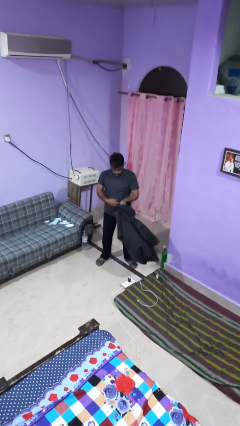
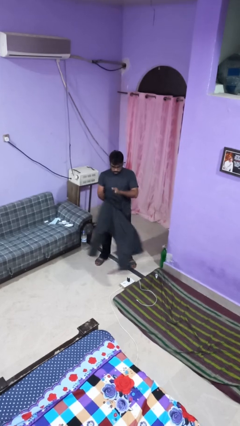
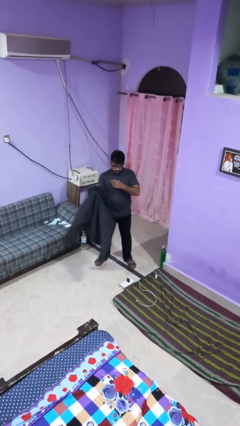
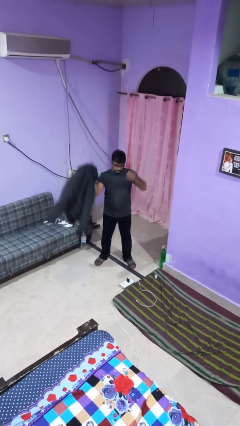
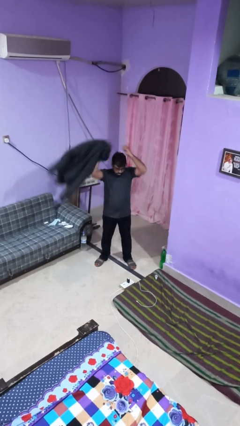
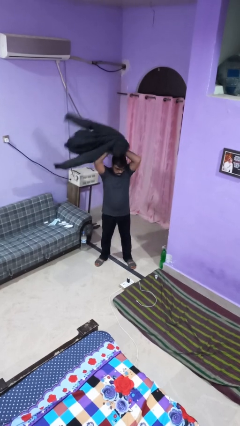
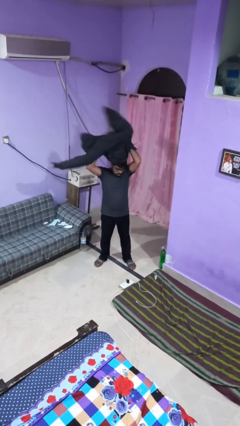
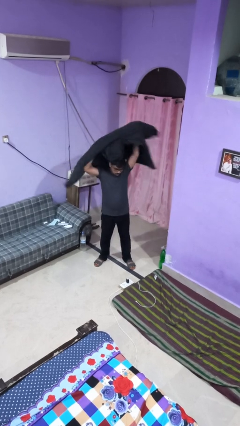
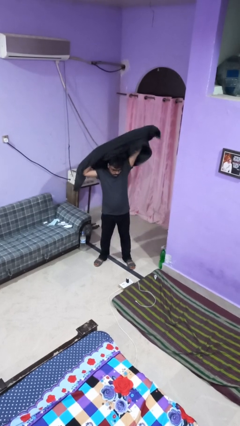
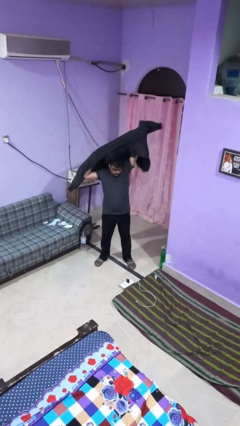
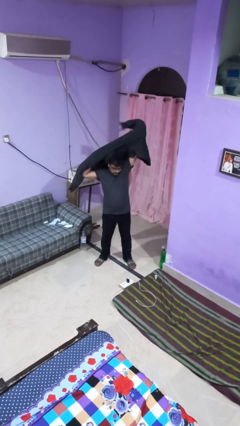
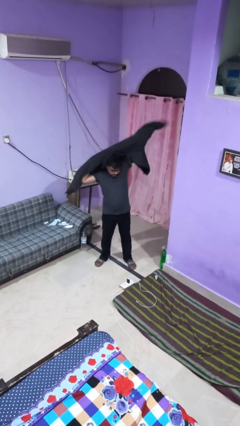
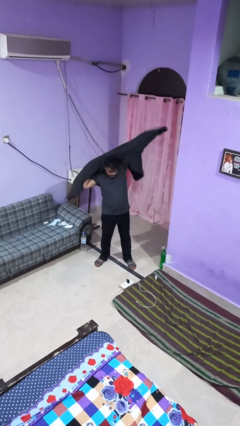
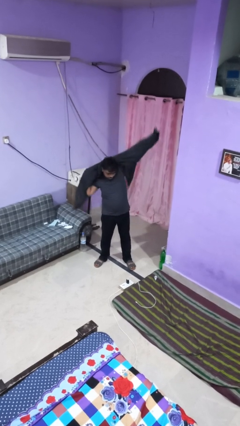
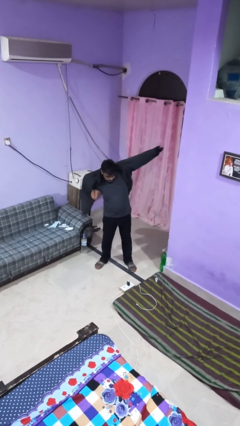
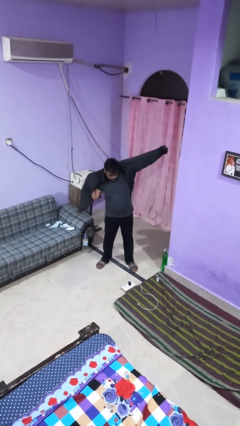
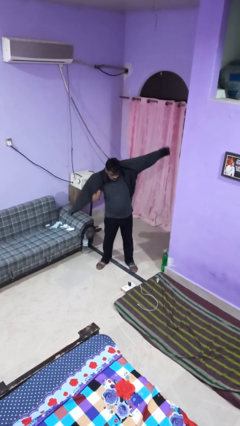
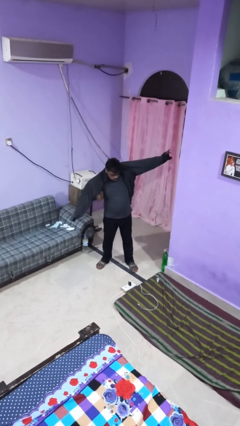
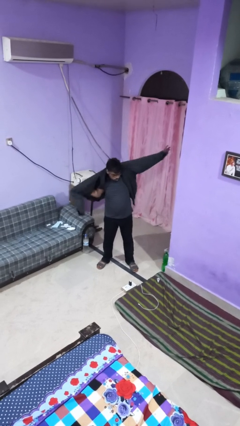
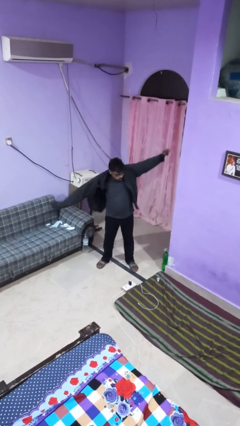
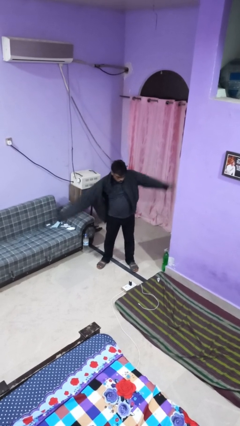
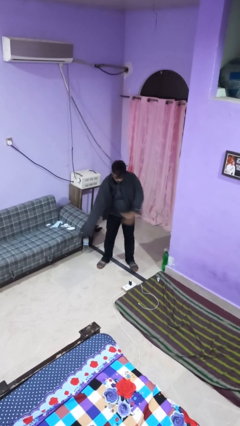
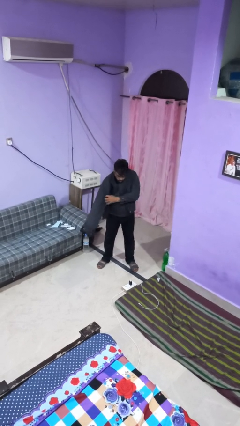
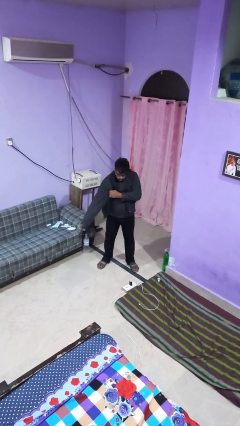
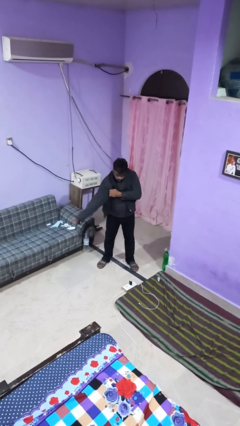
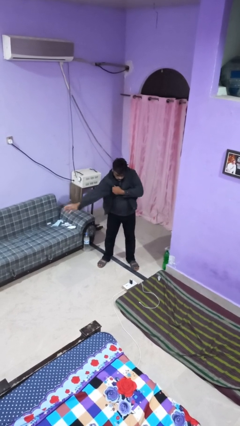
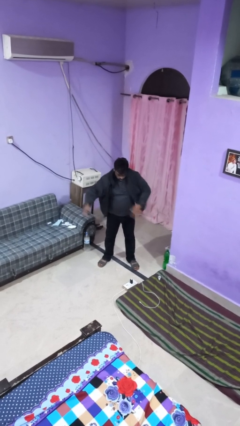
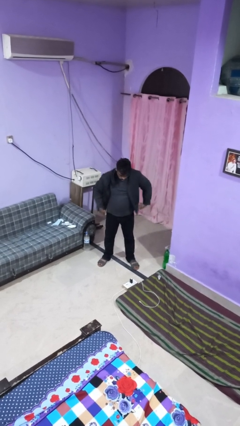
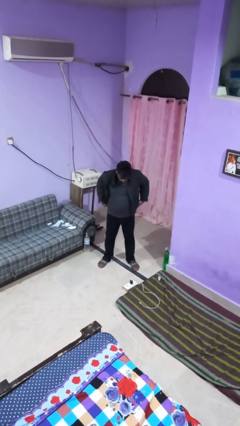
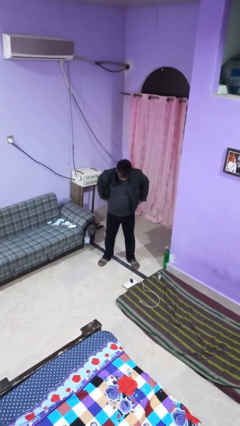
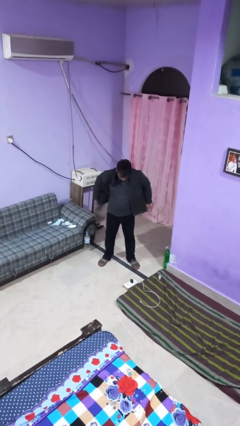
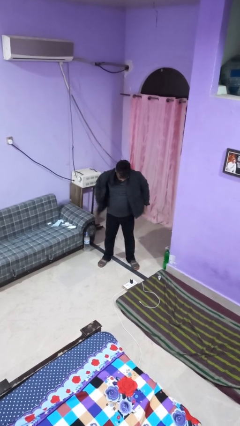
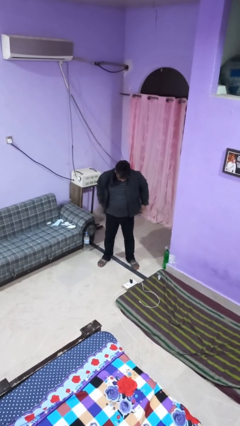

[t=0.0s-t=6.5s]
person puts on jacket

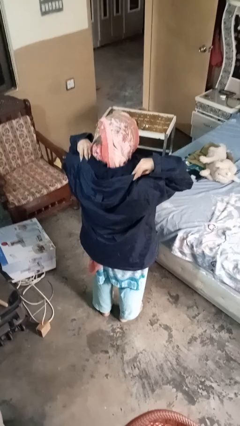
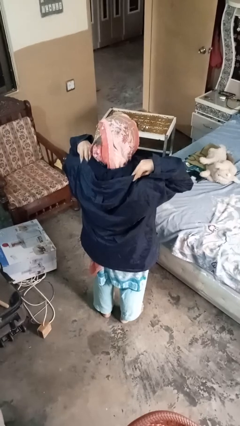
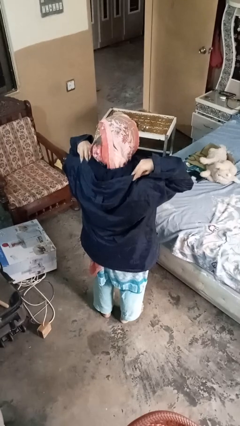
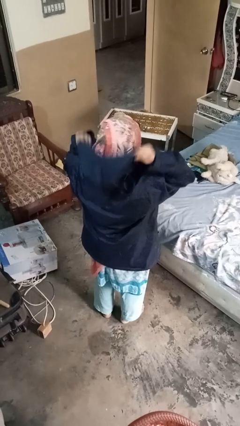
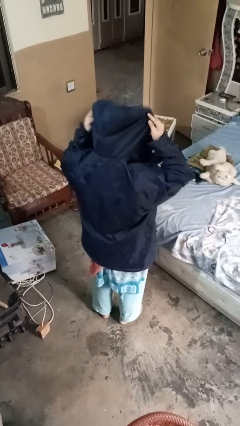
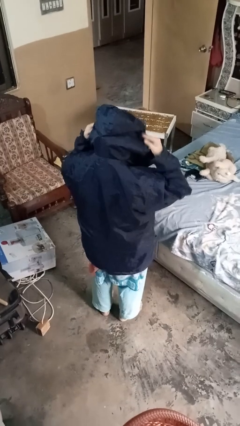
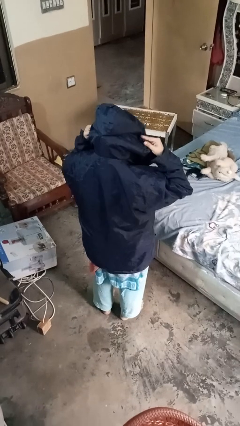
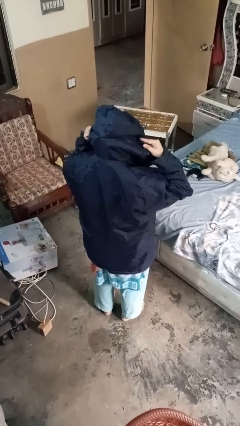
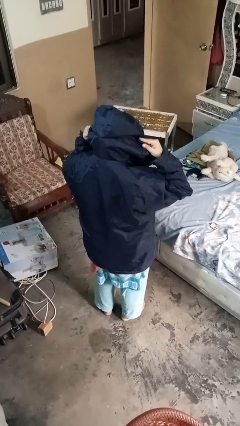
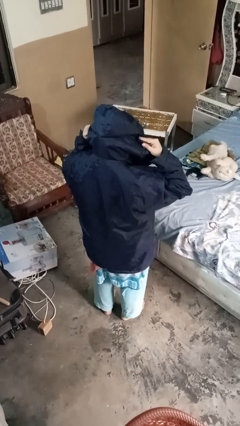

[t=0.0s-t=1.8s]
person puts on hoodie

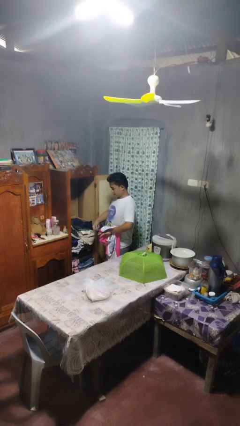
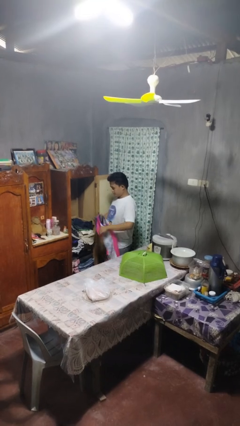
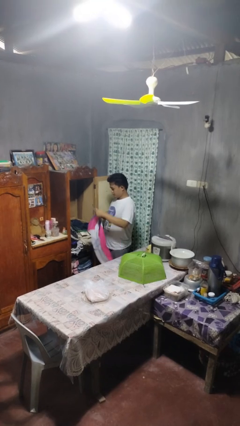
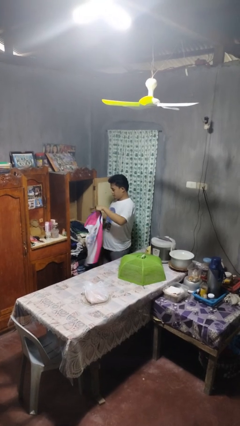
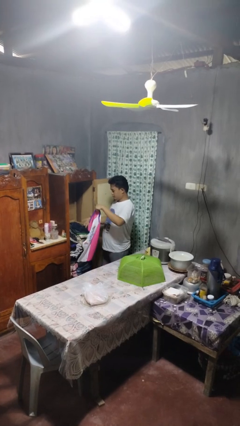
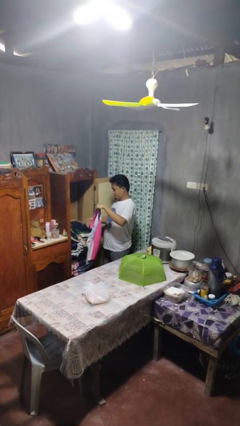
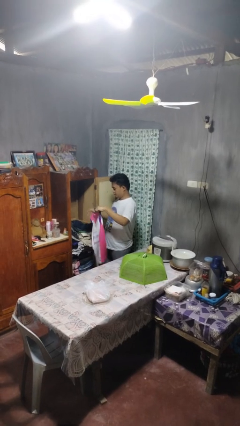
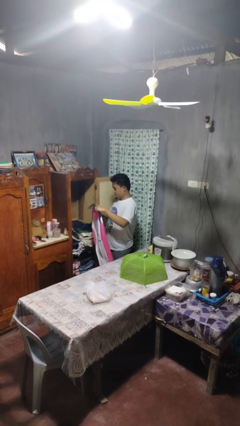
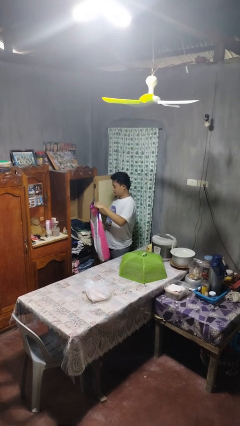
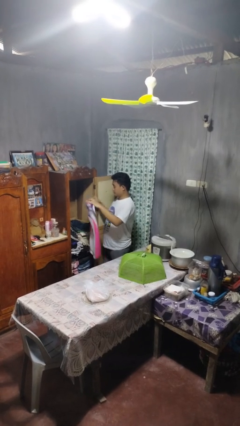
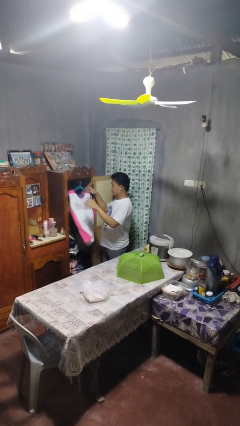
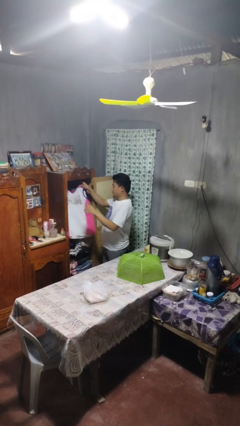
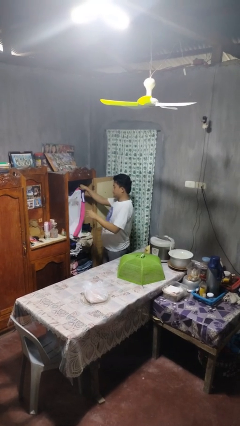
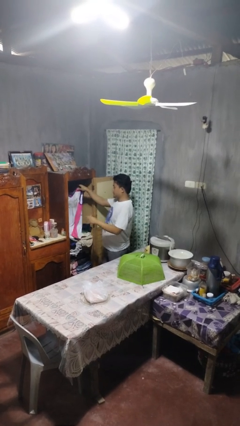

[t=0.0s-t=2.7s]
person puts clothes into closet

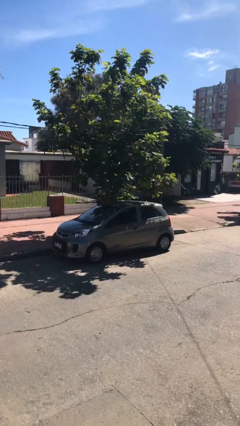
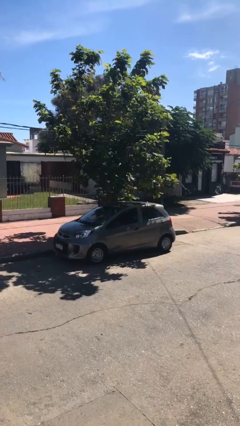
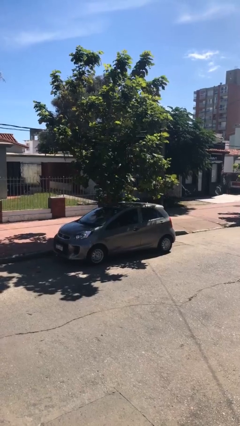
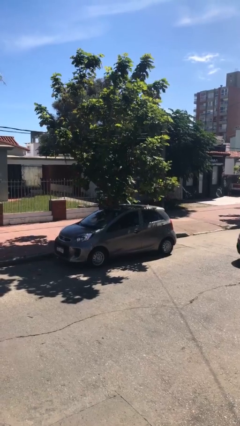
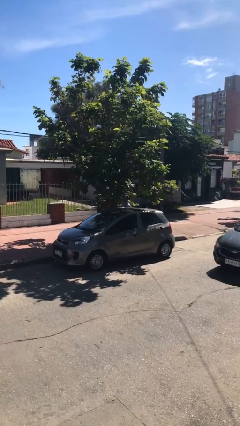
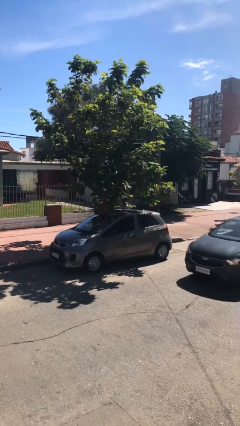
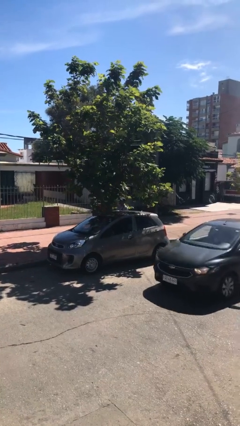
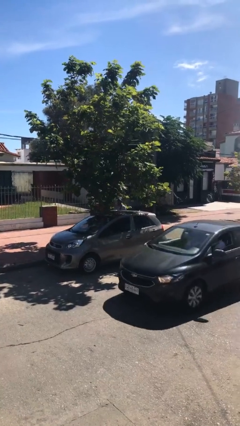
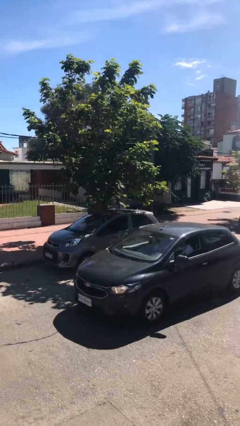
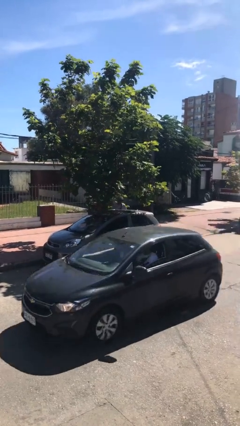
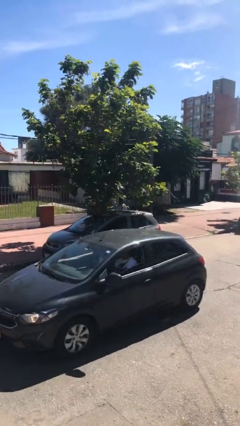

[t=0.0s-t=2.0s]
person exits car

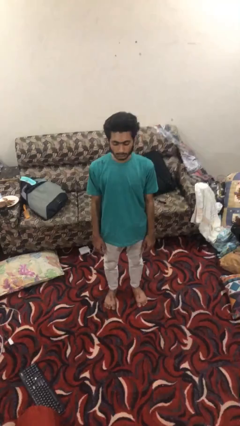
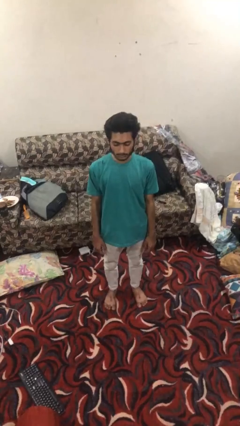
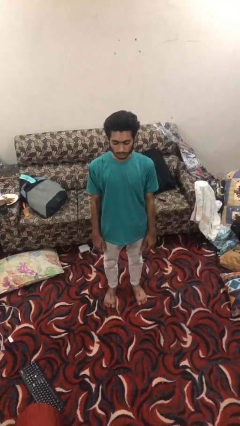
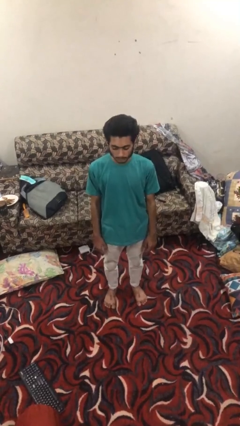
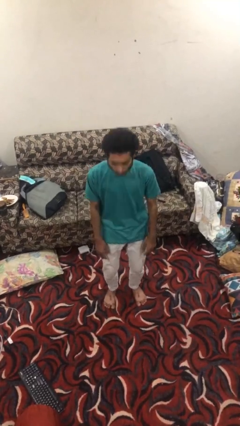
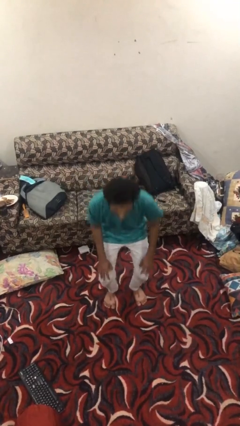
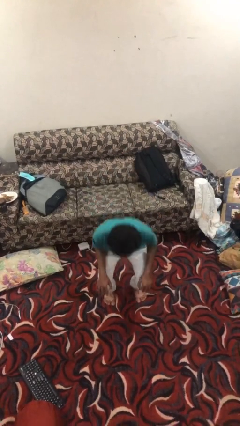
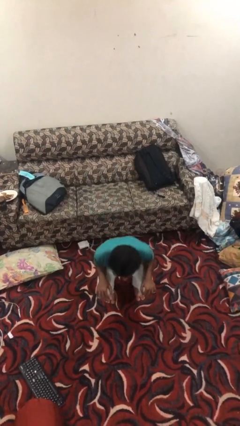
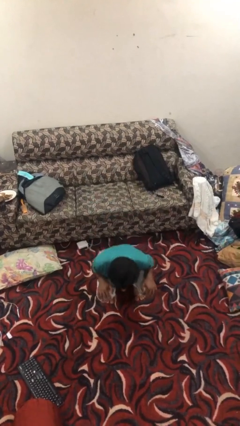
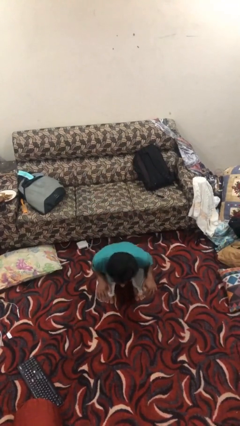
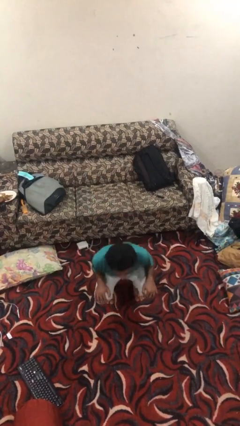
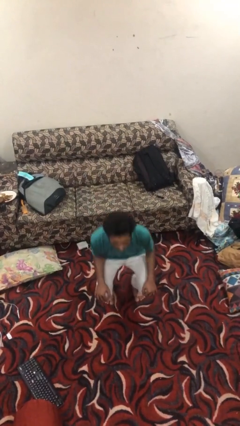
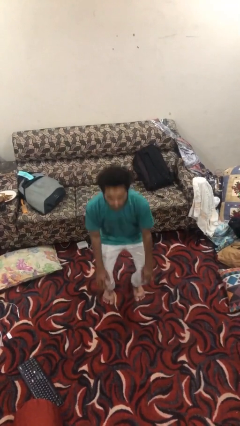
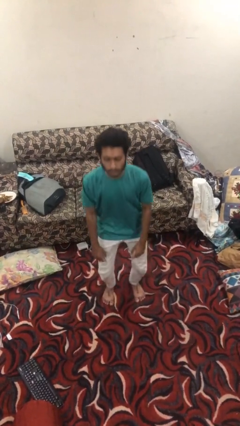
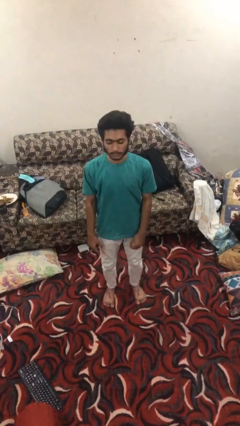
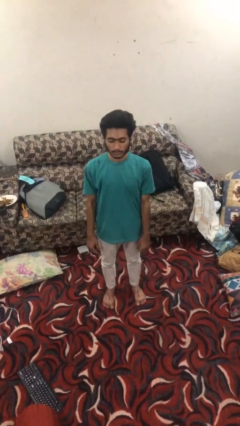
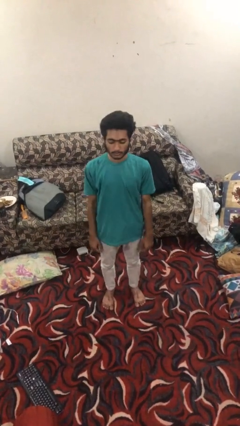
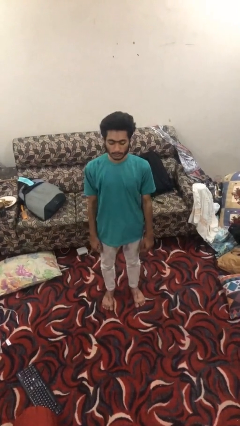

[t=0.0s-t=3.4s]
person exercises with situp

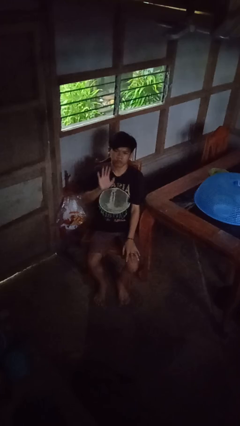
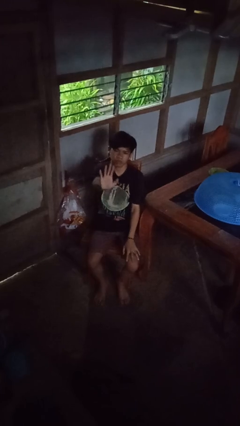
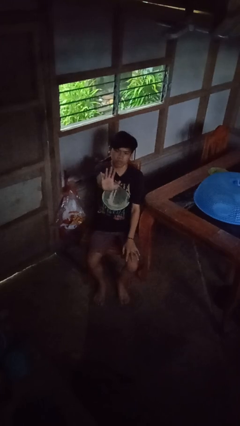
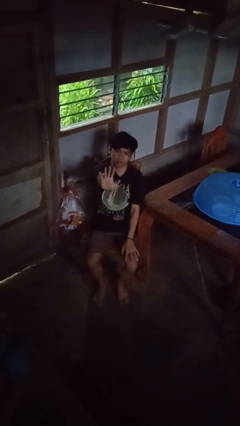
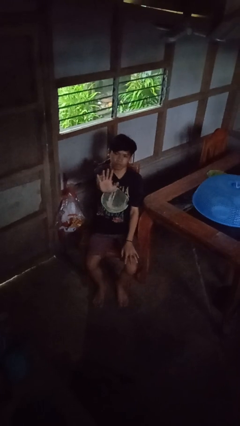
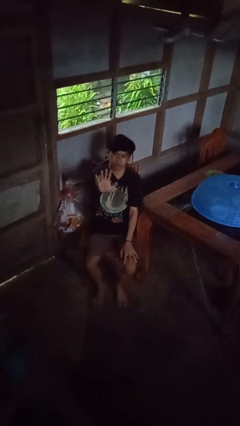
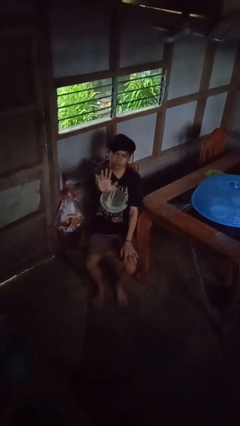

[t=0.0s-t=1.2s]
person gestures number five
